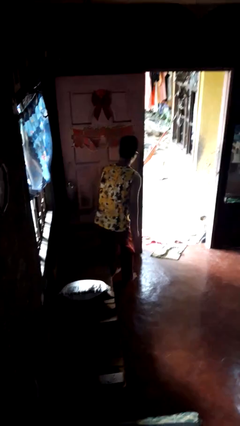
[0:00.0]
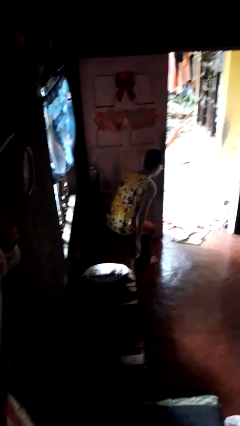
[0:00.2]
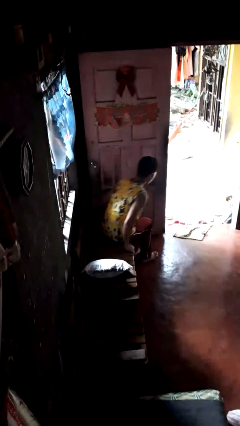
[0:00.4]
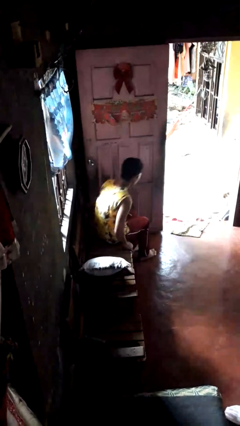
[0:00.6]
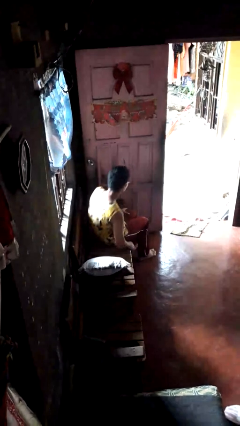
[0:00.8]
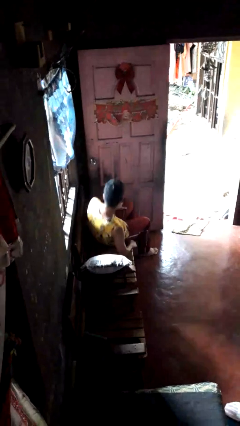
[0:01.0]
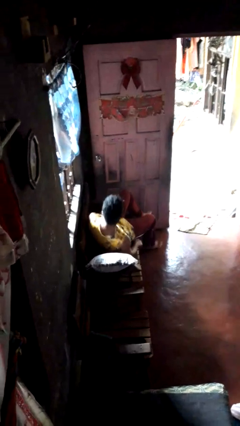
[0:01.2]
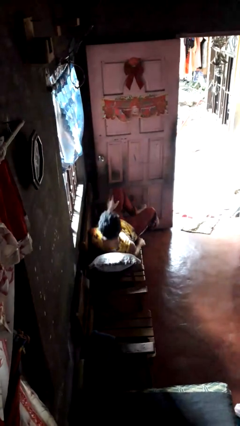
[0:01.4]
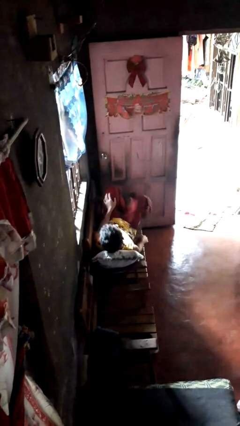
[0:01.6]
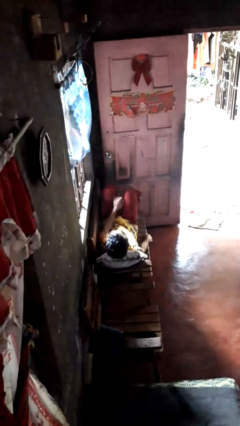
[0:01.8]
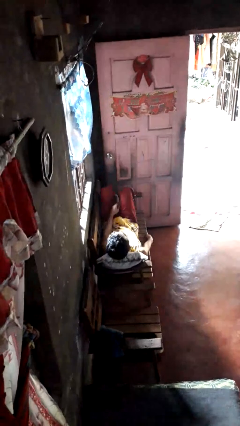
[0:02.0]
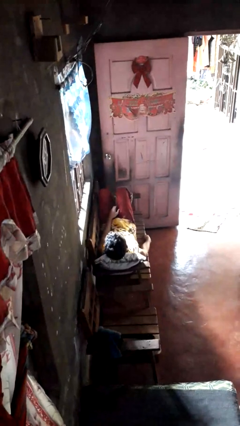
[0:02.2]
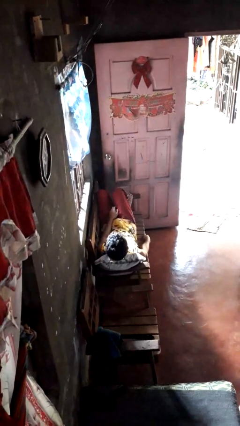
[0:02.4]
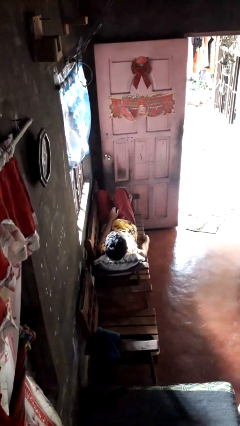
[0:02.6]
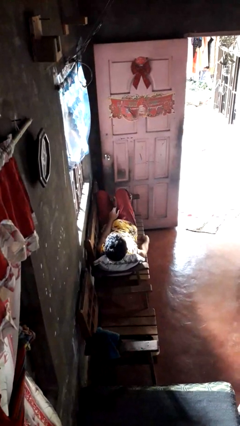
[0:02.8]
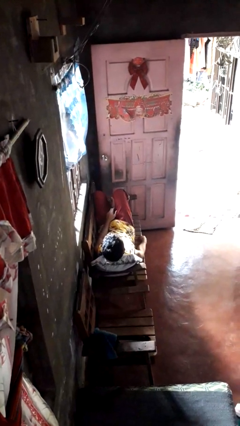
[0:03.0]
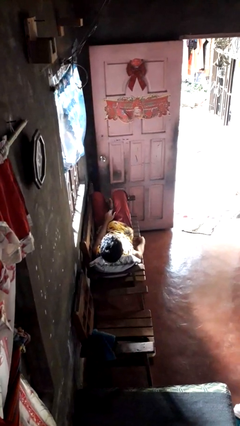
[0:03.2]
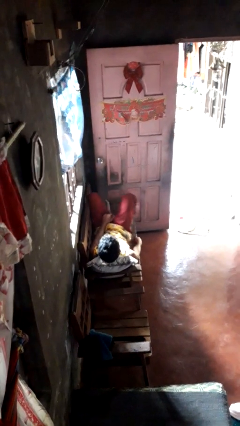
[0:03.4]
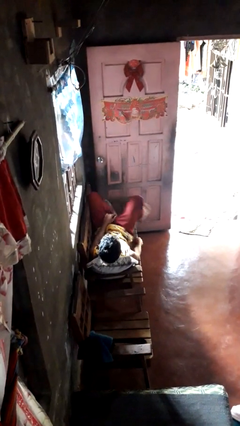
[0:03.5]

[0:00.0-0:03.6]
person lies down on couch

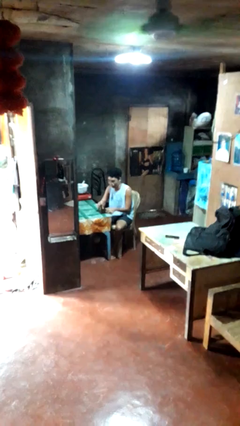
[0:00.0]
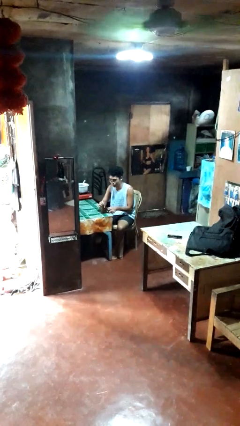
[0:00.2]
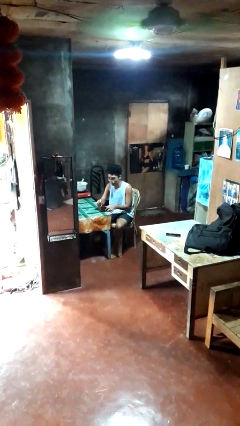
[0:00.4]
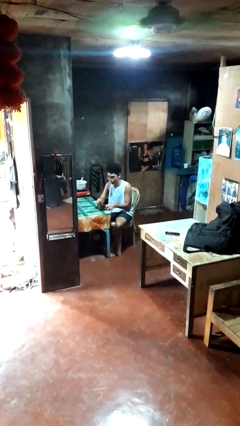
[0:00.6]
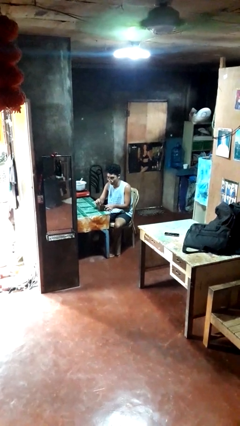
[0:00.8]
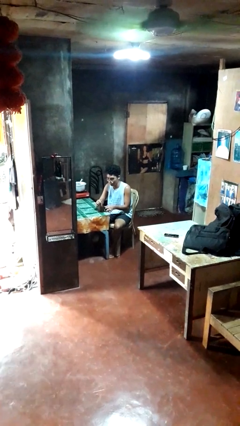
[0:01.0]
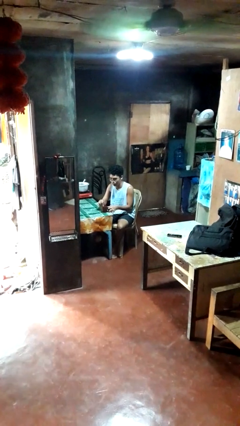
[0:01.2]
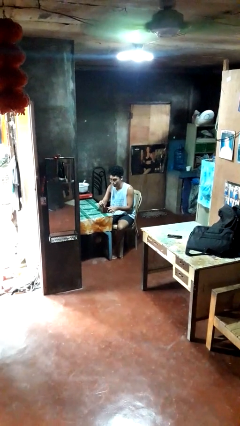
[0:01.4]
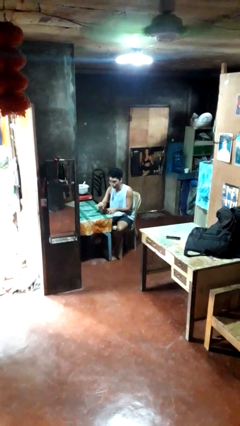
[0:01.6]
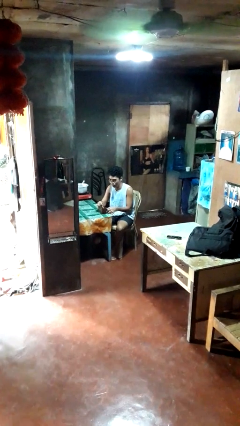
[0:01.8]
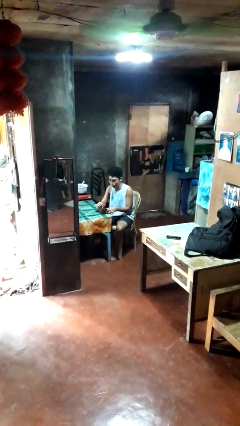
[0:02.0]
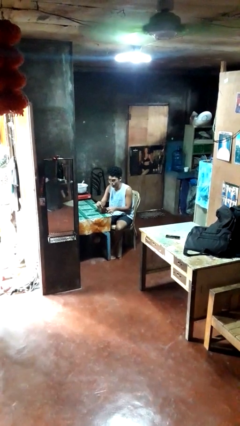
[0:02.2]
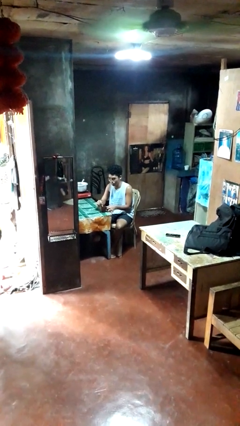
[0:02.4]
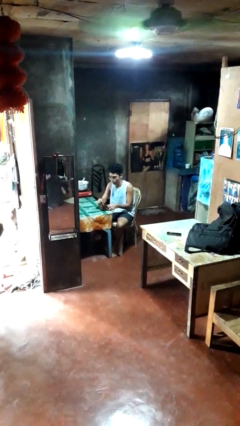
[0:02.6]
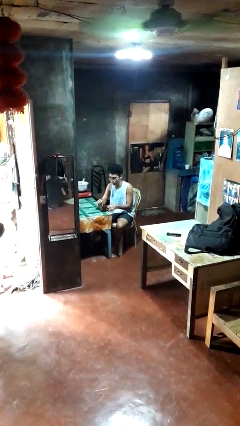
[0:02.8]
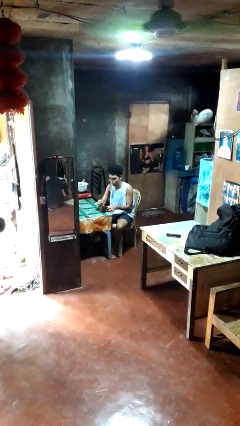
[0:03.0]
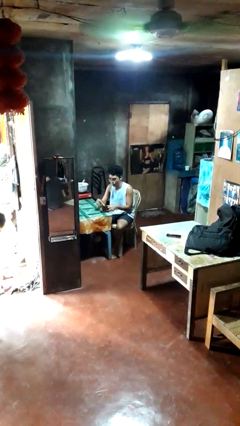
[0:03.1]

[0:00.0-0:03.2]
person stirs mug

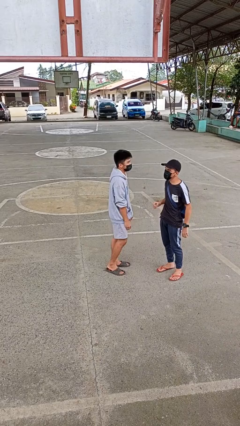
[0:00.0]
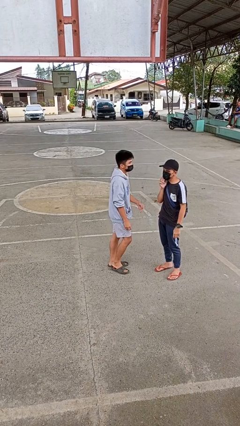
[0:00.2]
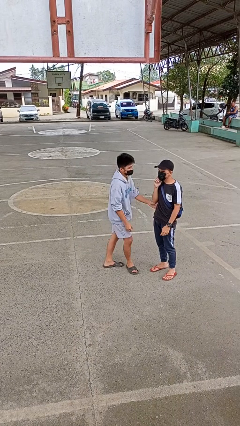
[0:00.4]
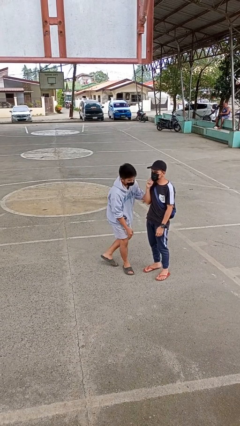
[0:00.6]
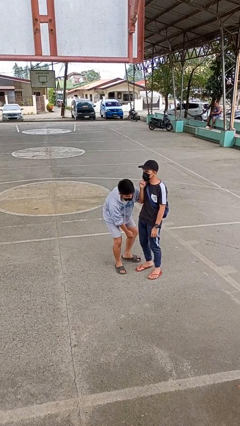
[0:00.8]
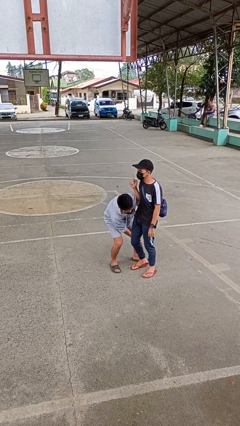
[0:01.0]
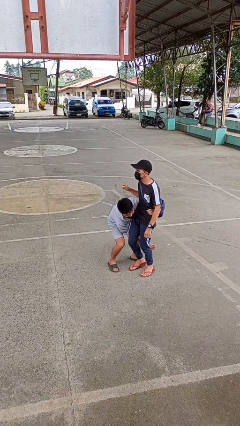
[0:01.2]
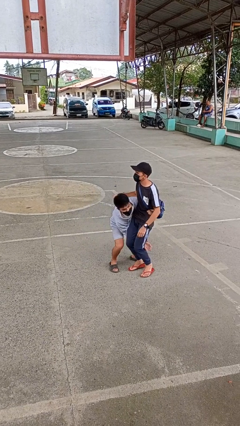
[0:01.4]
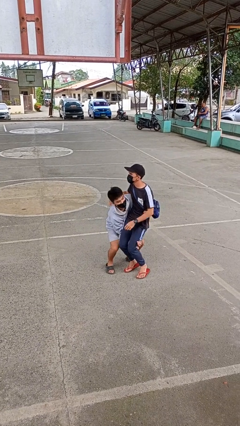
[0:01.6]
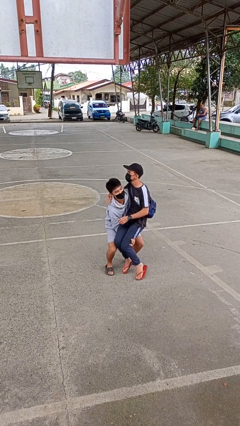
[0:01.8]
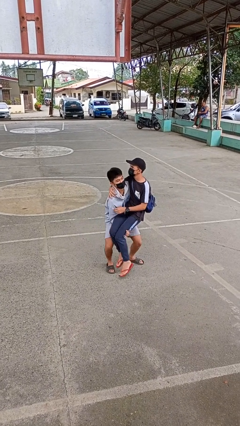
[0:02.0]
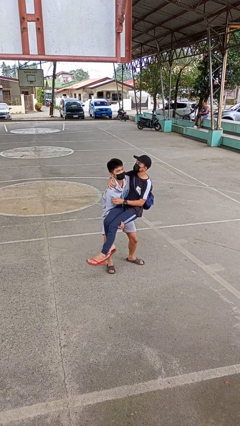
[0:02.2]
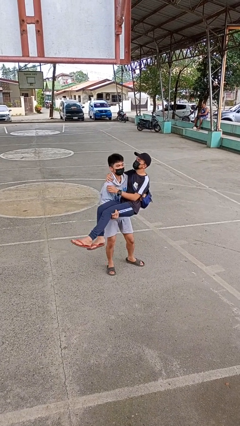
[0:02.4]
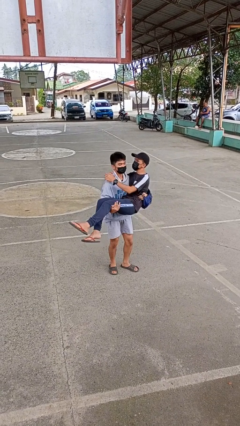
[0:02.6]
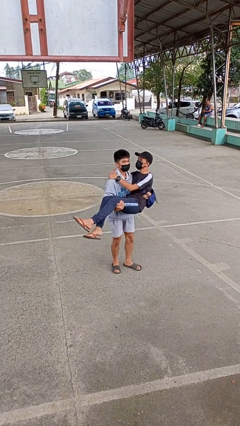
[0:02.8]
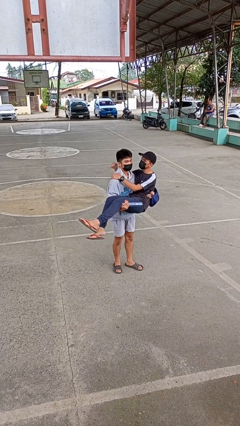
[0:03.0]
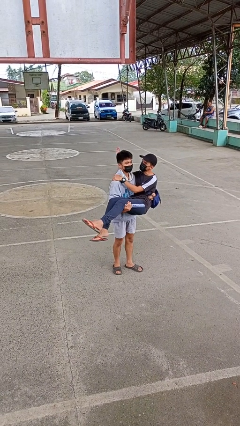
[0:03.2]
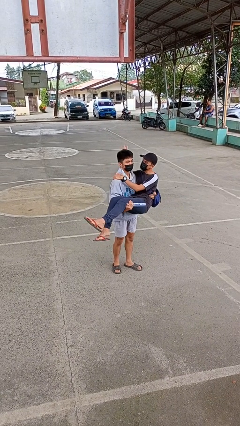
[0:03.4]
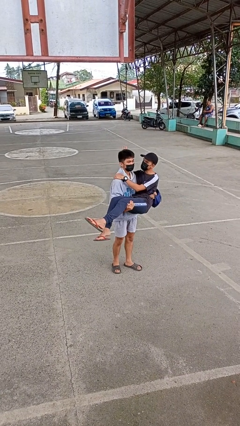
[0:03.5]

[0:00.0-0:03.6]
person picks up person

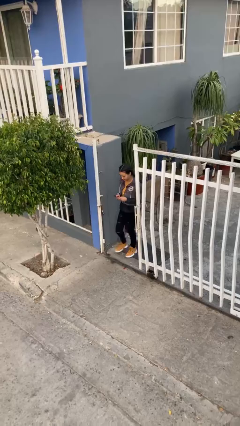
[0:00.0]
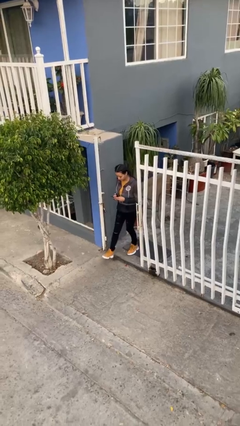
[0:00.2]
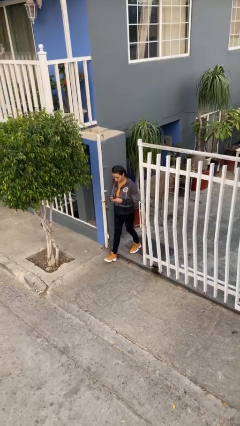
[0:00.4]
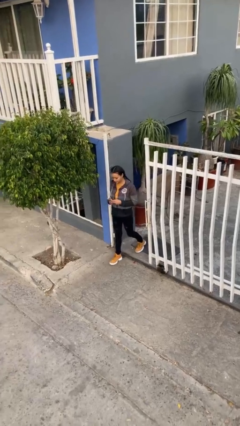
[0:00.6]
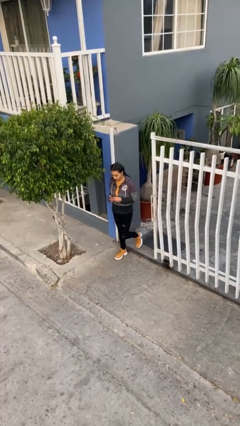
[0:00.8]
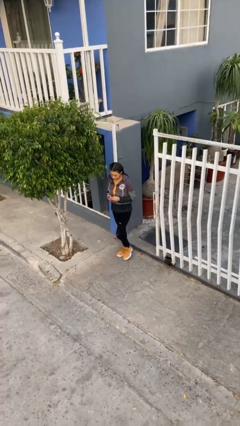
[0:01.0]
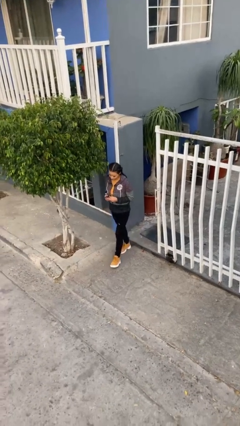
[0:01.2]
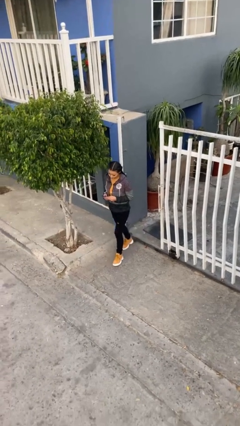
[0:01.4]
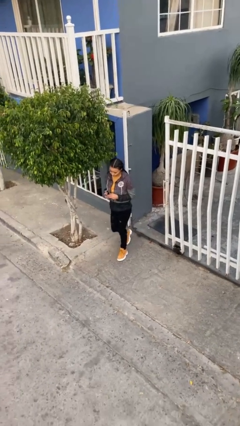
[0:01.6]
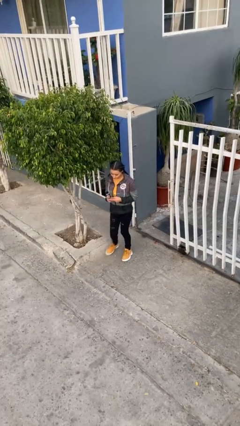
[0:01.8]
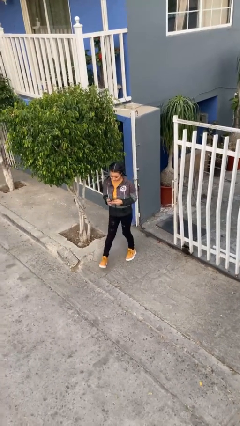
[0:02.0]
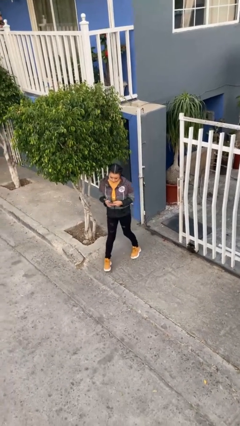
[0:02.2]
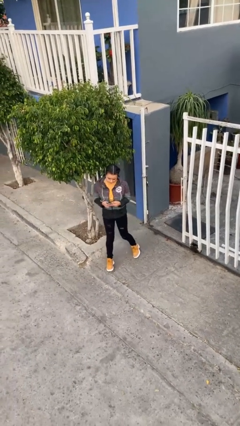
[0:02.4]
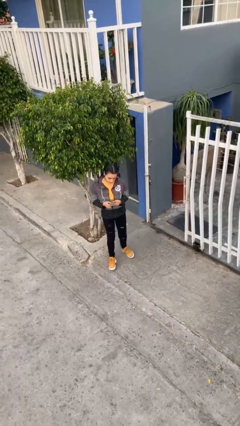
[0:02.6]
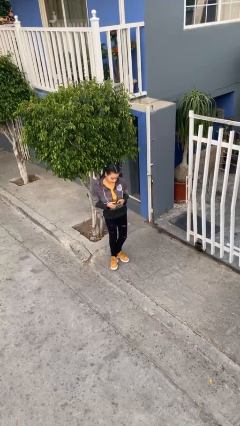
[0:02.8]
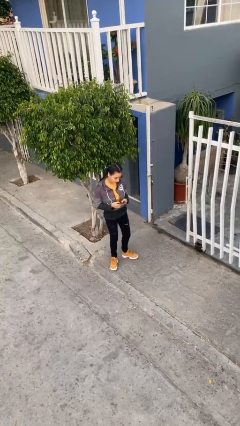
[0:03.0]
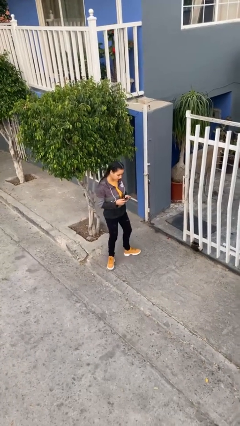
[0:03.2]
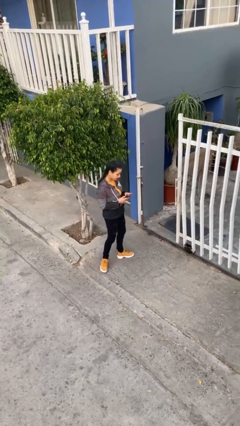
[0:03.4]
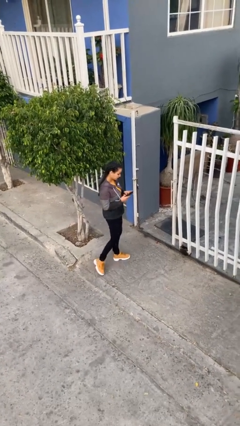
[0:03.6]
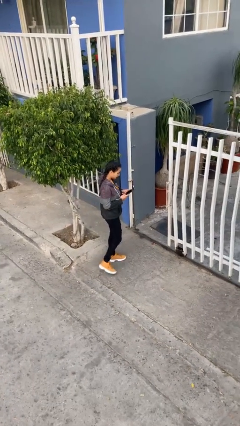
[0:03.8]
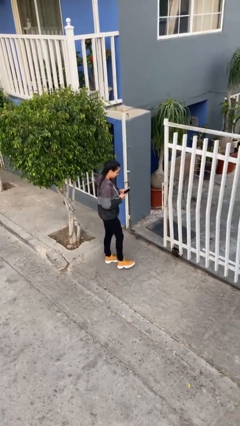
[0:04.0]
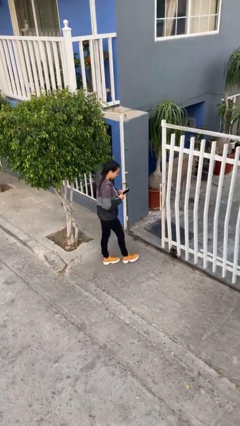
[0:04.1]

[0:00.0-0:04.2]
person enters scene through structure

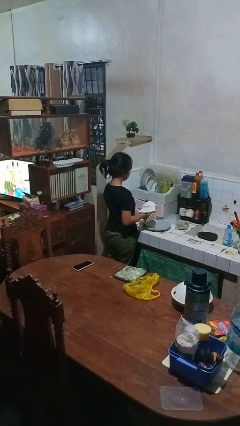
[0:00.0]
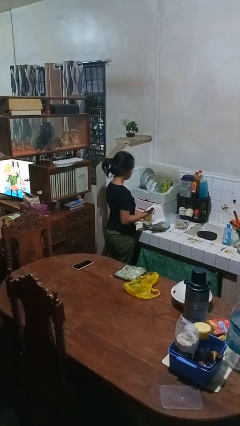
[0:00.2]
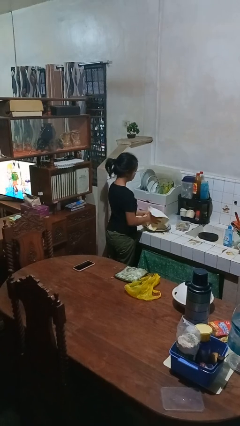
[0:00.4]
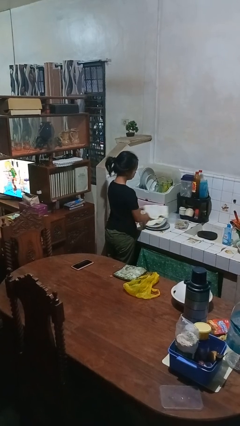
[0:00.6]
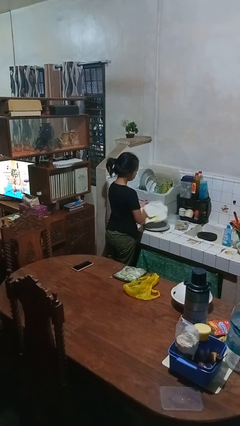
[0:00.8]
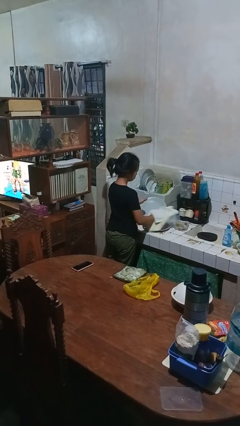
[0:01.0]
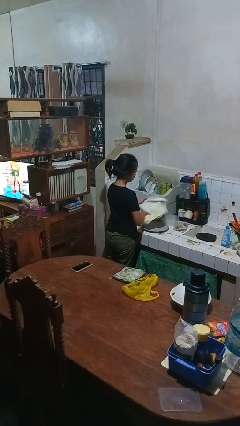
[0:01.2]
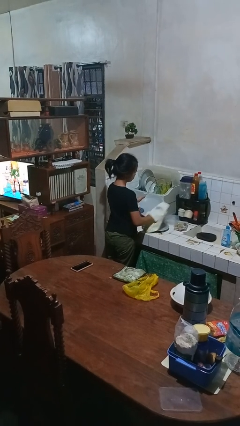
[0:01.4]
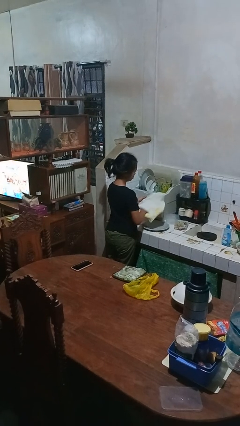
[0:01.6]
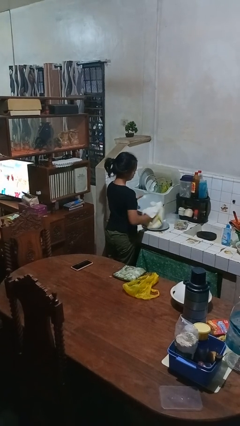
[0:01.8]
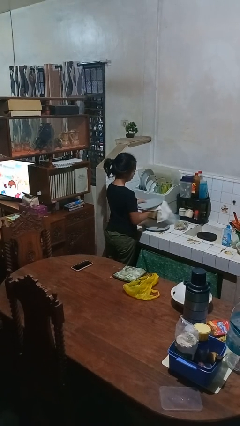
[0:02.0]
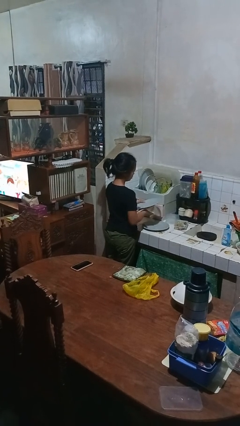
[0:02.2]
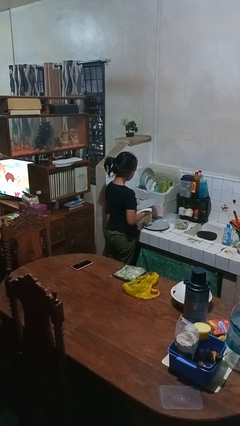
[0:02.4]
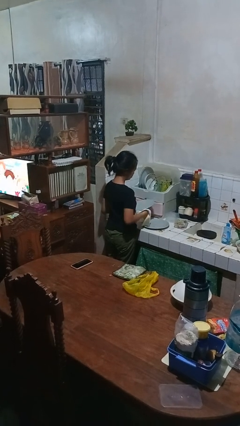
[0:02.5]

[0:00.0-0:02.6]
person dries dish

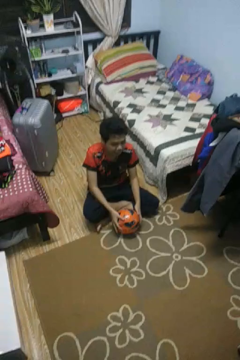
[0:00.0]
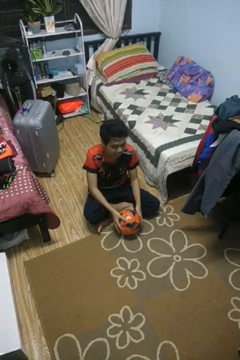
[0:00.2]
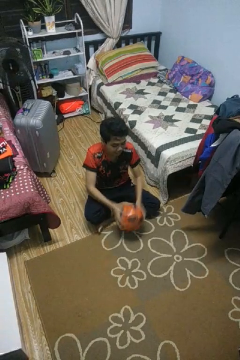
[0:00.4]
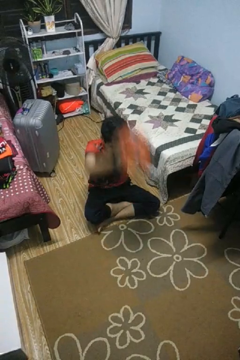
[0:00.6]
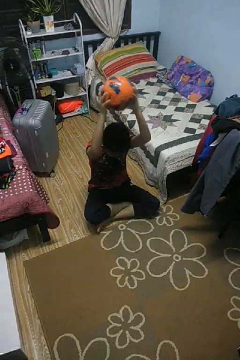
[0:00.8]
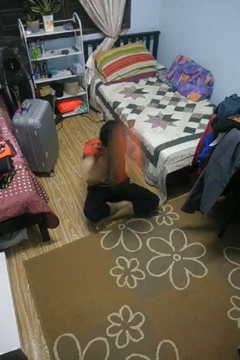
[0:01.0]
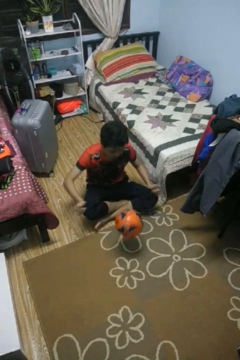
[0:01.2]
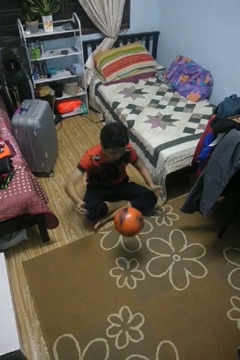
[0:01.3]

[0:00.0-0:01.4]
person bounces ball on floor
